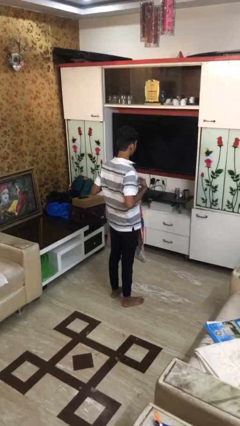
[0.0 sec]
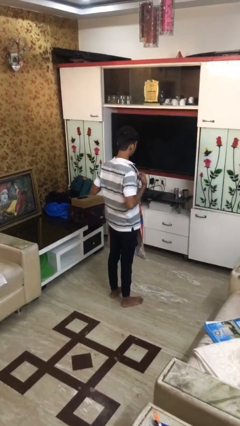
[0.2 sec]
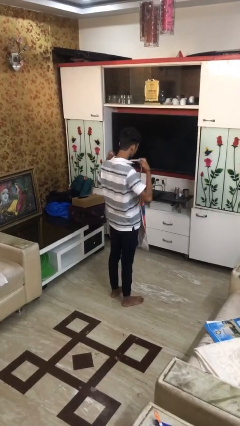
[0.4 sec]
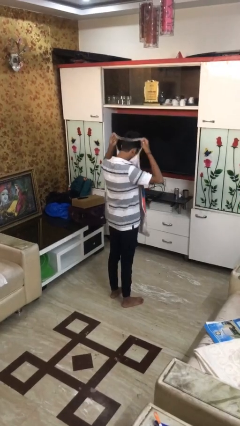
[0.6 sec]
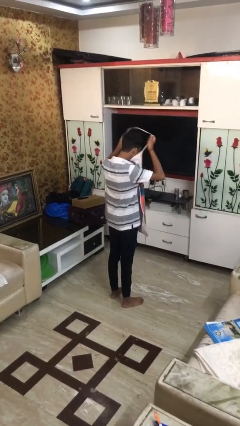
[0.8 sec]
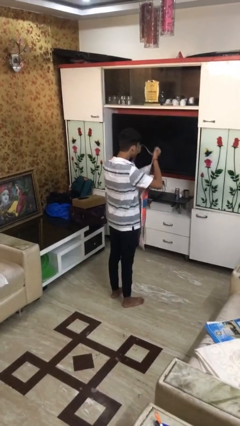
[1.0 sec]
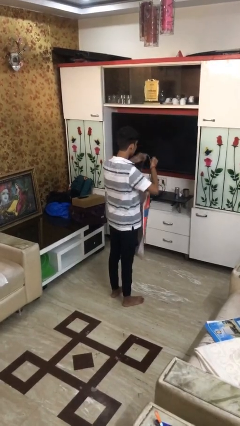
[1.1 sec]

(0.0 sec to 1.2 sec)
person takes off apron

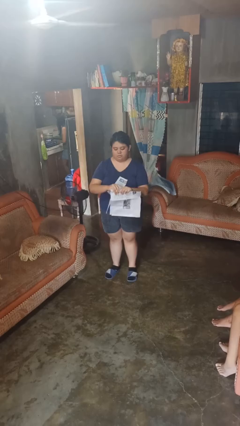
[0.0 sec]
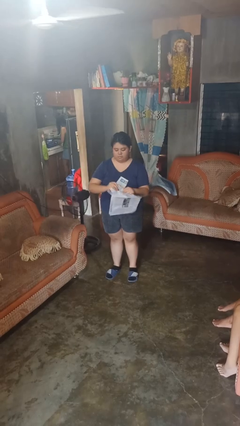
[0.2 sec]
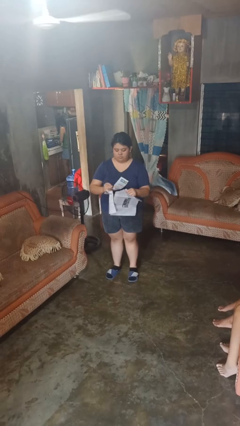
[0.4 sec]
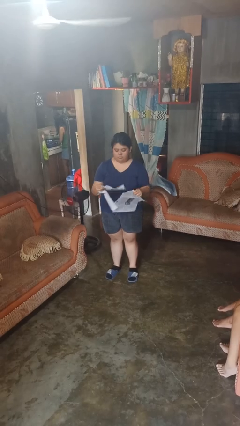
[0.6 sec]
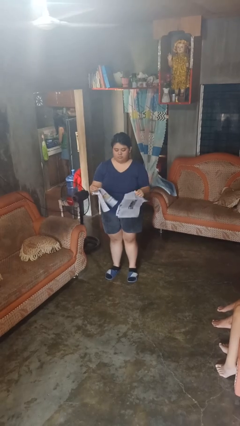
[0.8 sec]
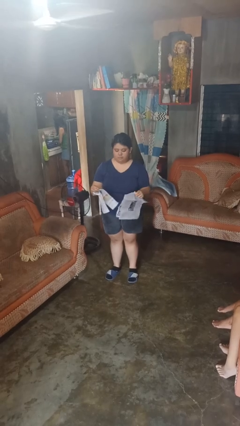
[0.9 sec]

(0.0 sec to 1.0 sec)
person tears paper

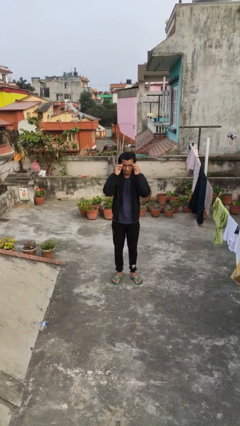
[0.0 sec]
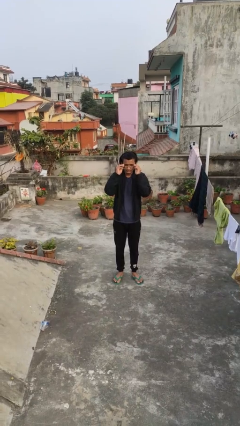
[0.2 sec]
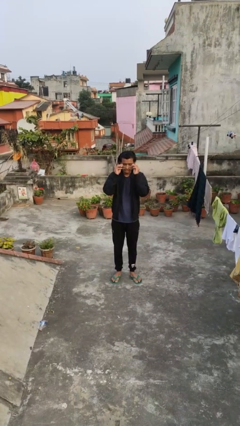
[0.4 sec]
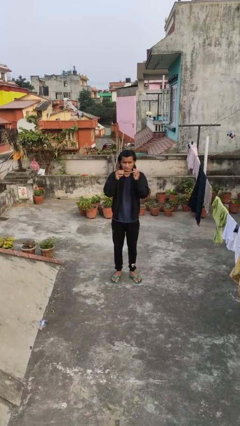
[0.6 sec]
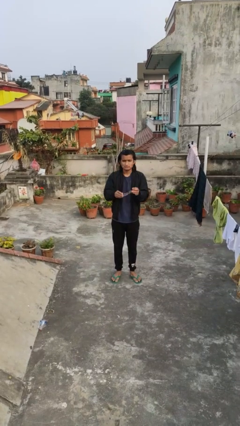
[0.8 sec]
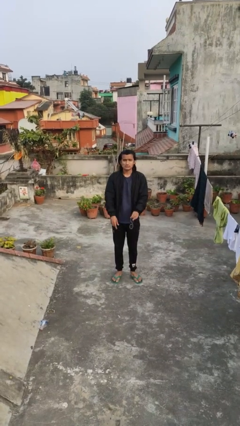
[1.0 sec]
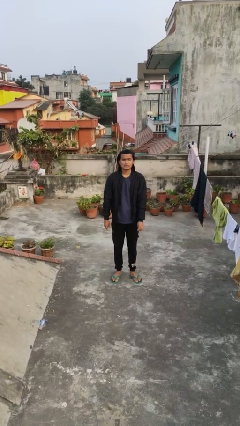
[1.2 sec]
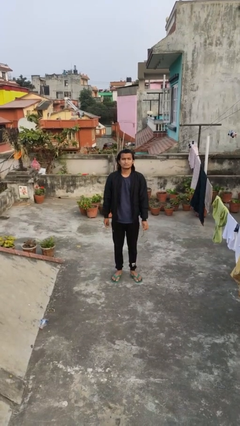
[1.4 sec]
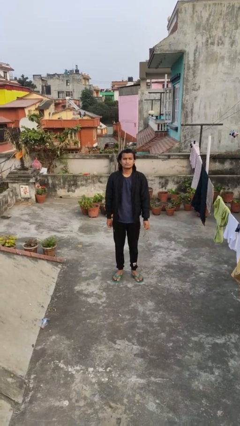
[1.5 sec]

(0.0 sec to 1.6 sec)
person takes off glasses

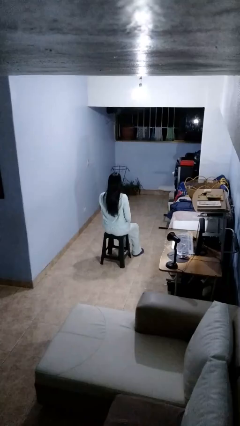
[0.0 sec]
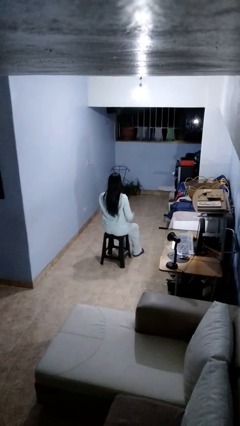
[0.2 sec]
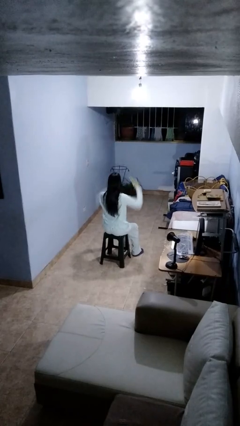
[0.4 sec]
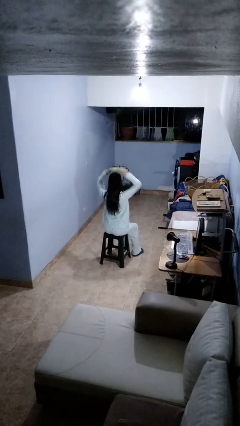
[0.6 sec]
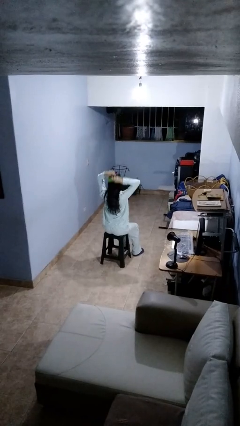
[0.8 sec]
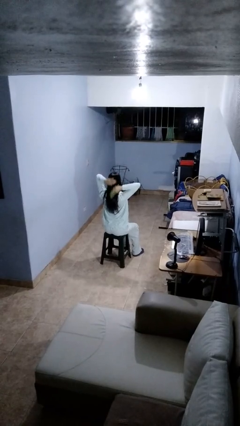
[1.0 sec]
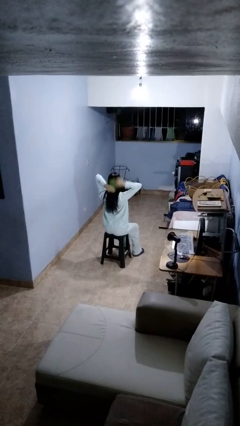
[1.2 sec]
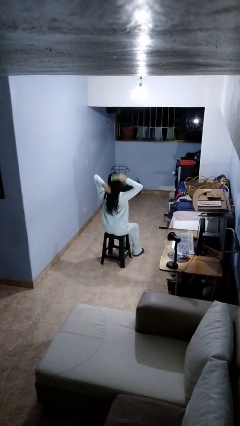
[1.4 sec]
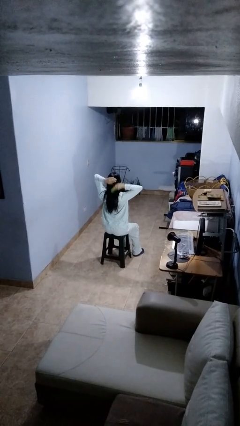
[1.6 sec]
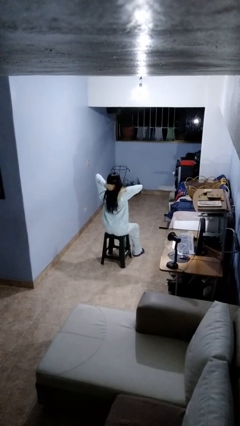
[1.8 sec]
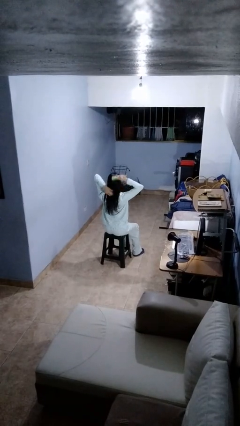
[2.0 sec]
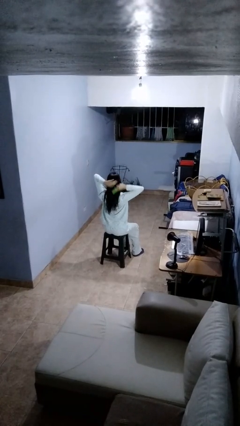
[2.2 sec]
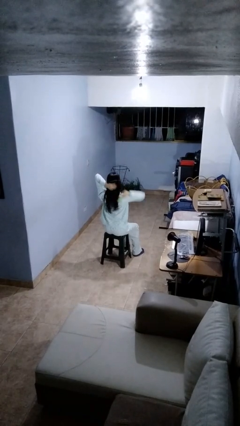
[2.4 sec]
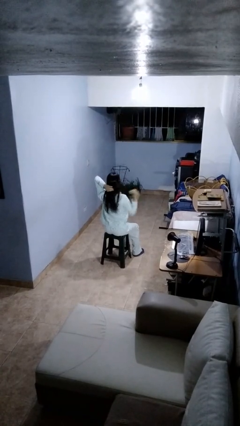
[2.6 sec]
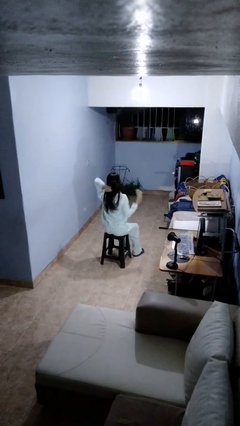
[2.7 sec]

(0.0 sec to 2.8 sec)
person brushes hair

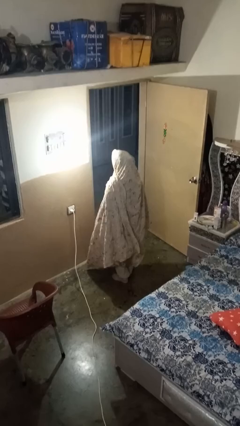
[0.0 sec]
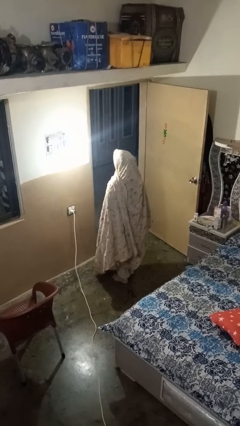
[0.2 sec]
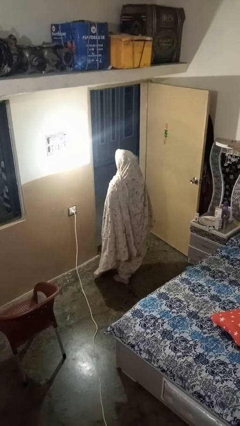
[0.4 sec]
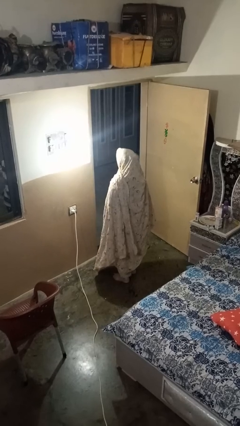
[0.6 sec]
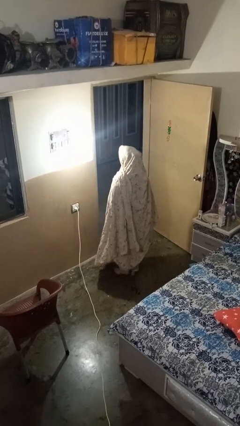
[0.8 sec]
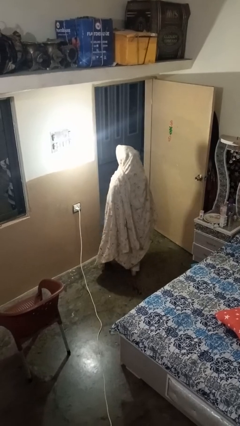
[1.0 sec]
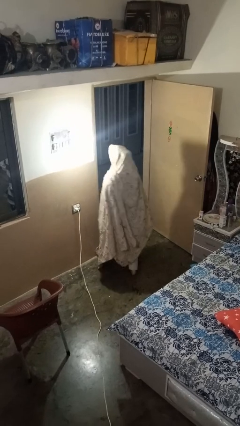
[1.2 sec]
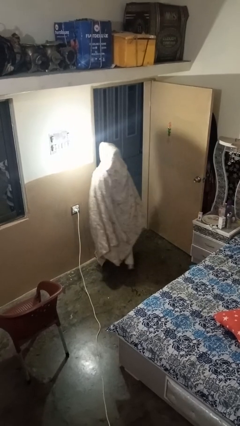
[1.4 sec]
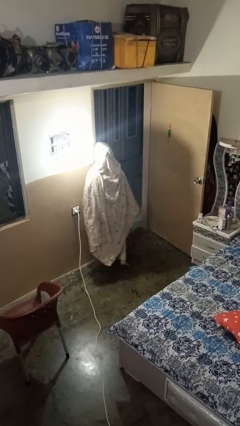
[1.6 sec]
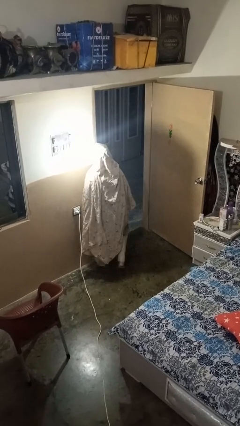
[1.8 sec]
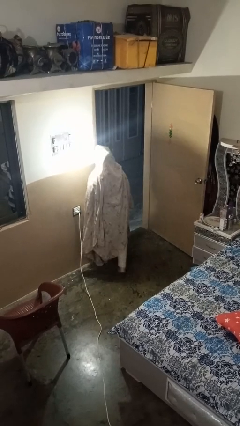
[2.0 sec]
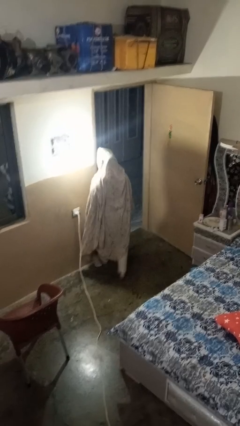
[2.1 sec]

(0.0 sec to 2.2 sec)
person bumps into wall

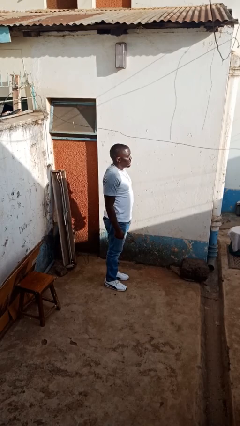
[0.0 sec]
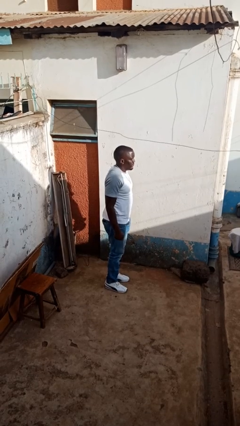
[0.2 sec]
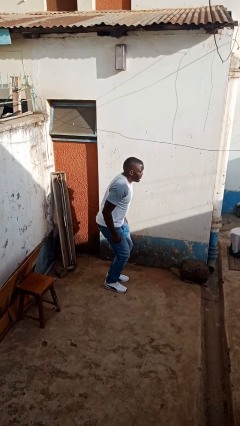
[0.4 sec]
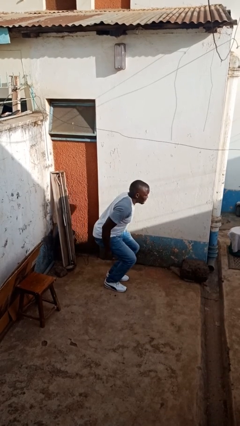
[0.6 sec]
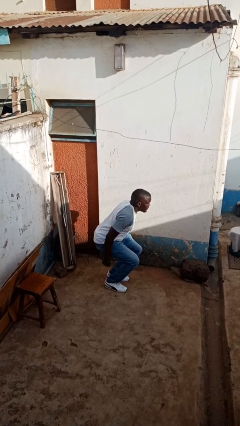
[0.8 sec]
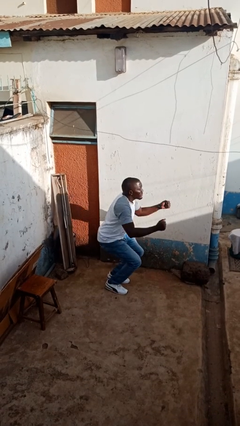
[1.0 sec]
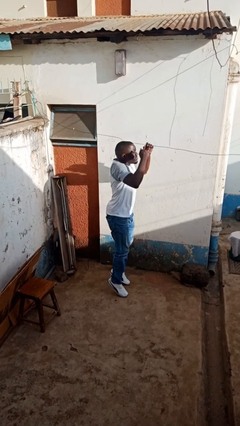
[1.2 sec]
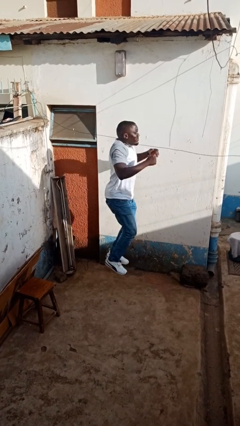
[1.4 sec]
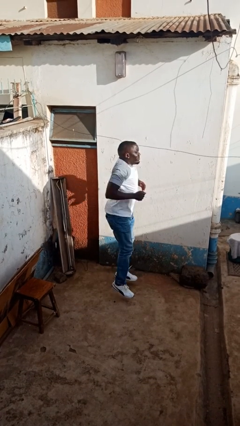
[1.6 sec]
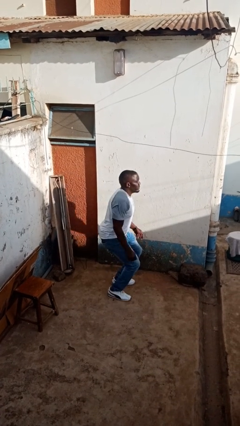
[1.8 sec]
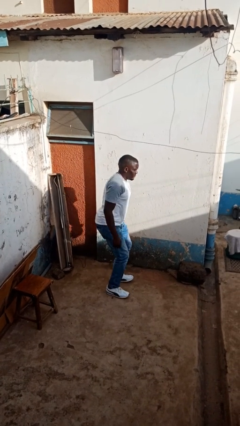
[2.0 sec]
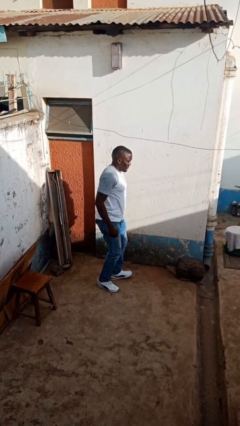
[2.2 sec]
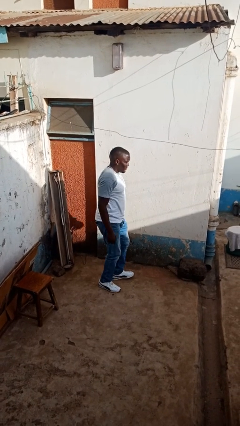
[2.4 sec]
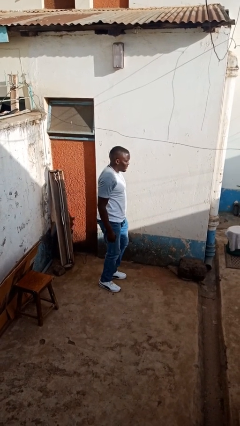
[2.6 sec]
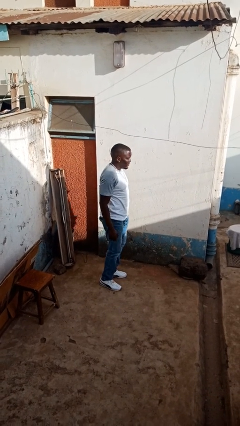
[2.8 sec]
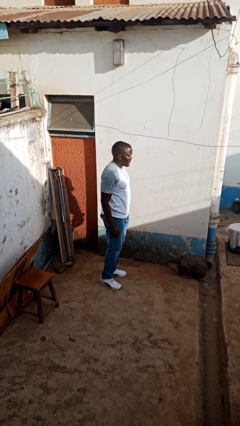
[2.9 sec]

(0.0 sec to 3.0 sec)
person jumps

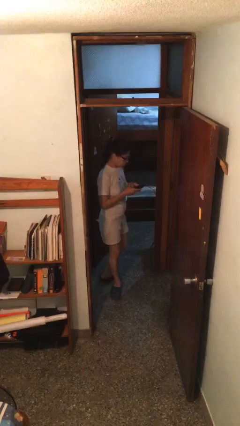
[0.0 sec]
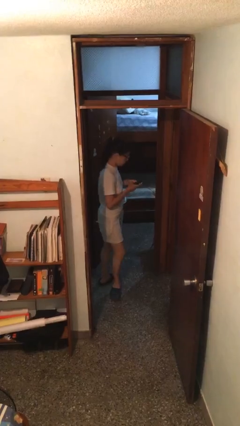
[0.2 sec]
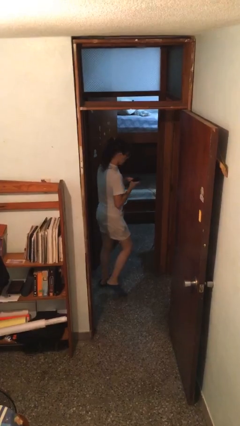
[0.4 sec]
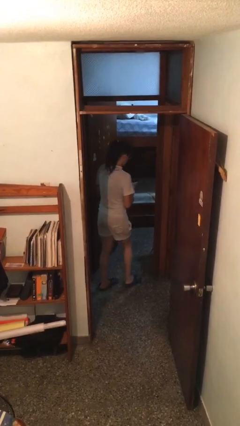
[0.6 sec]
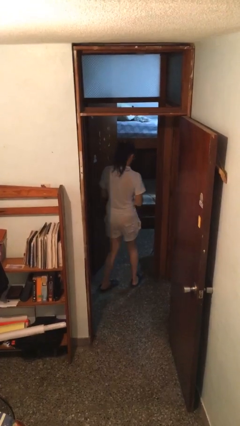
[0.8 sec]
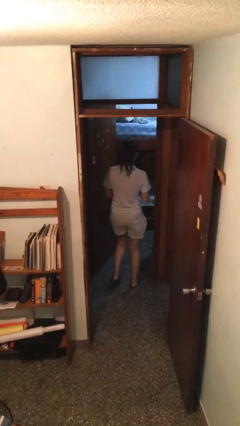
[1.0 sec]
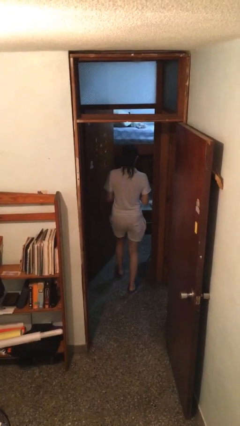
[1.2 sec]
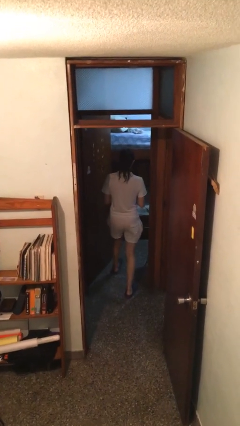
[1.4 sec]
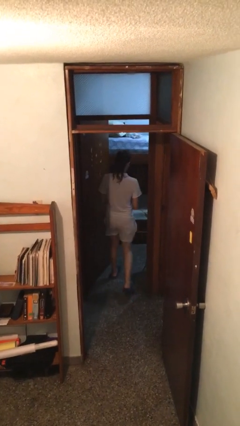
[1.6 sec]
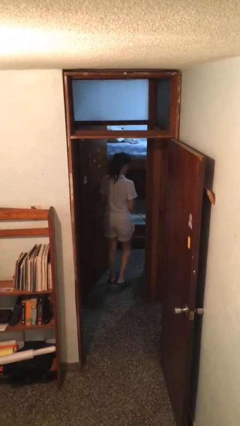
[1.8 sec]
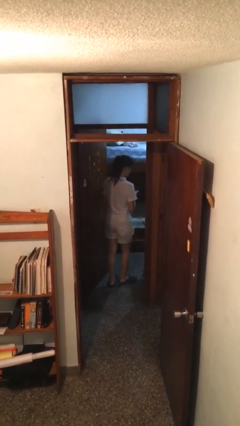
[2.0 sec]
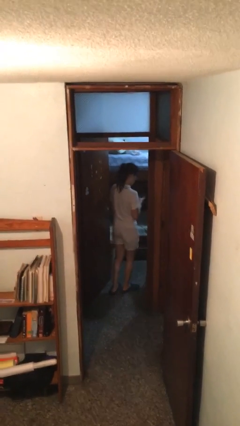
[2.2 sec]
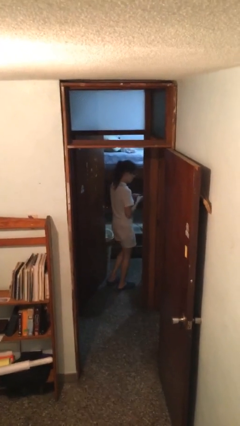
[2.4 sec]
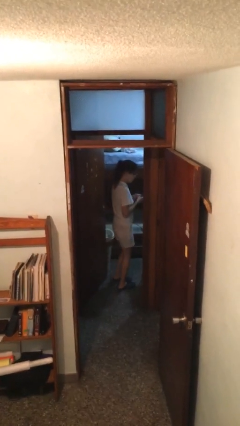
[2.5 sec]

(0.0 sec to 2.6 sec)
person exits scene through structure

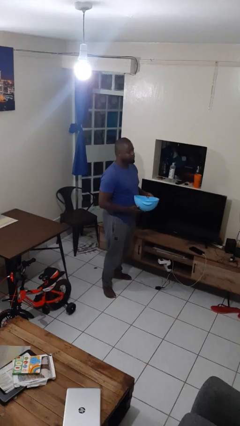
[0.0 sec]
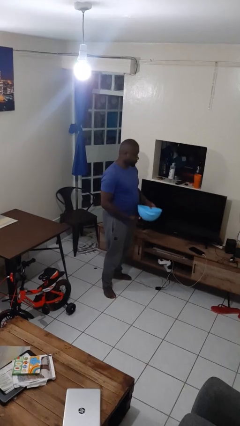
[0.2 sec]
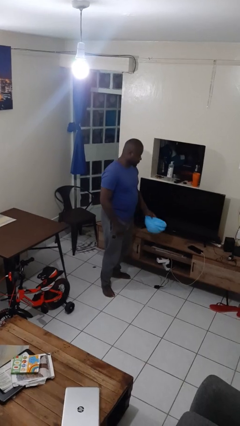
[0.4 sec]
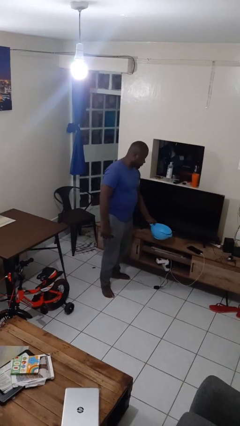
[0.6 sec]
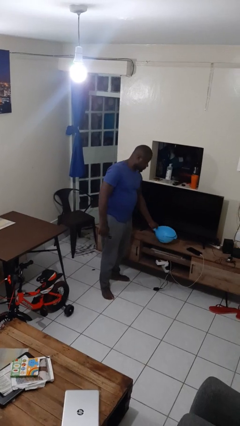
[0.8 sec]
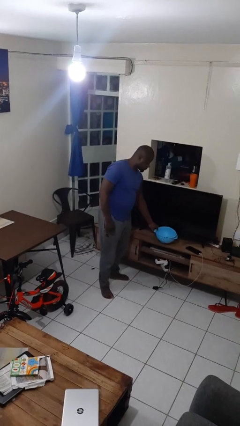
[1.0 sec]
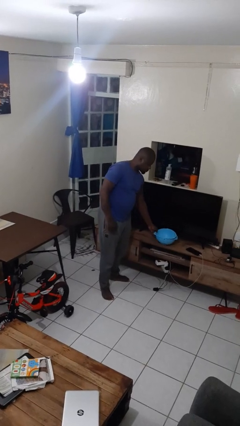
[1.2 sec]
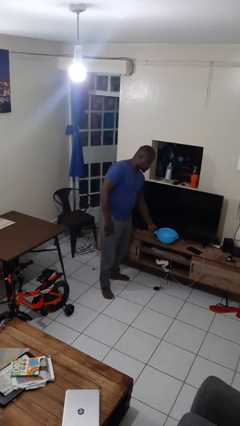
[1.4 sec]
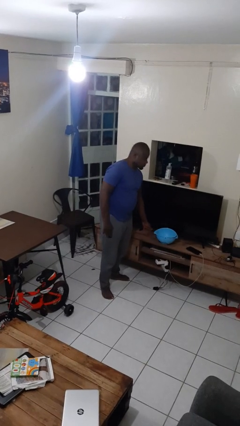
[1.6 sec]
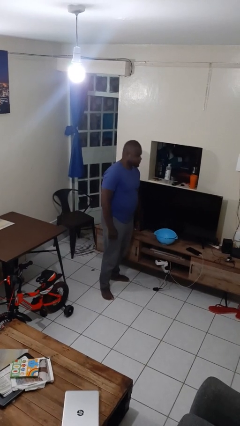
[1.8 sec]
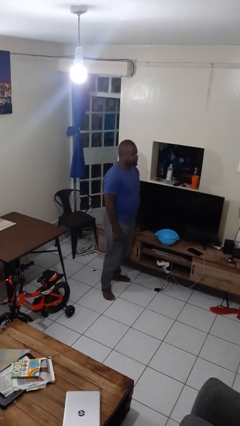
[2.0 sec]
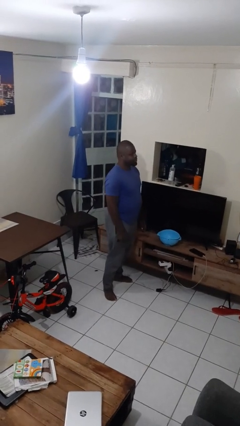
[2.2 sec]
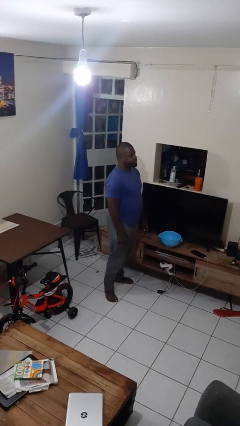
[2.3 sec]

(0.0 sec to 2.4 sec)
person puts down object on countertop
